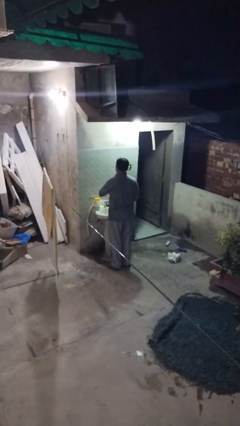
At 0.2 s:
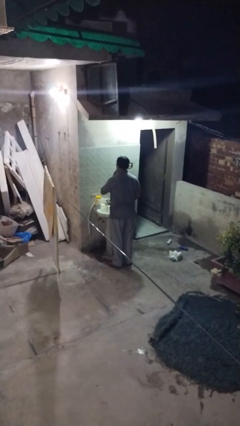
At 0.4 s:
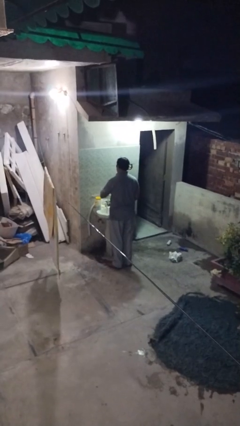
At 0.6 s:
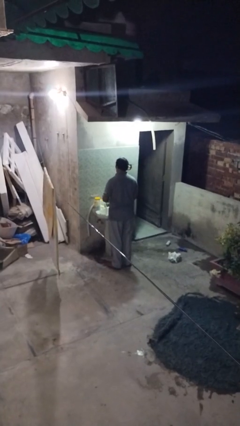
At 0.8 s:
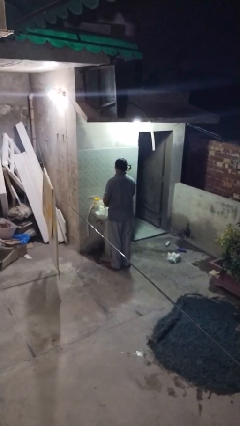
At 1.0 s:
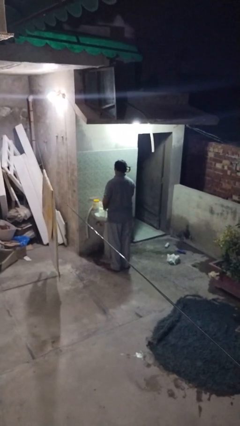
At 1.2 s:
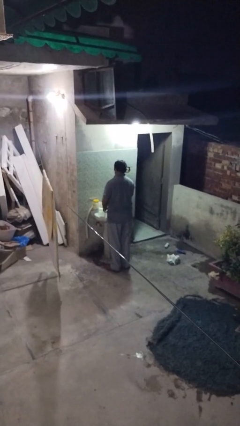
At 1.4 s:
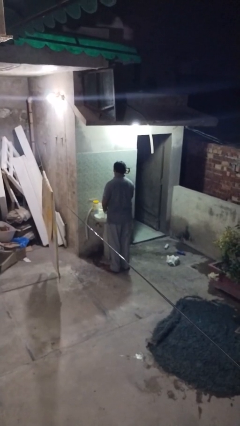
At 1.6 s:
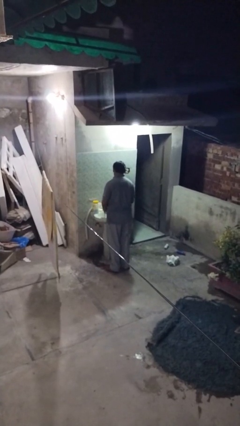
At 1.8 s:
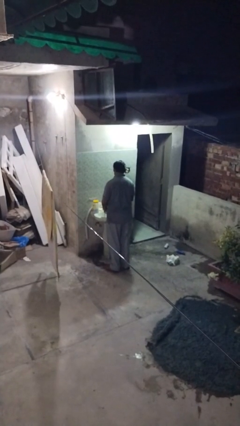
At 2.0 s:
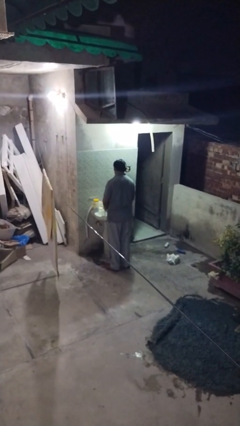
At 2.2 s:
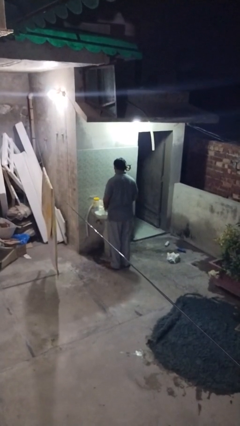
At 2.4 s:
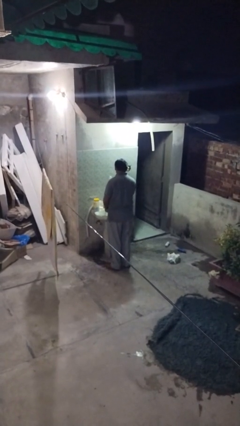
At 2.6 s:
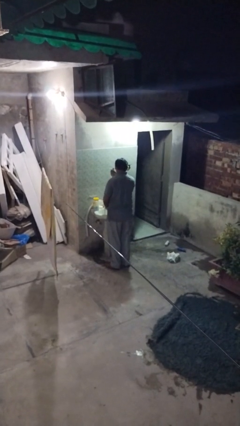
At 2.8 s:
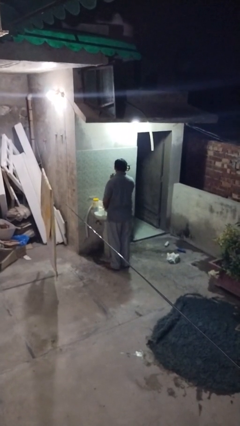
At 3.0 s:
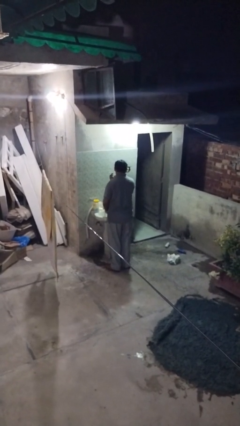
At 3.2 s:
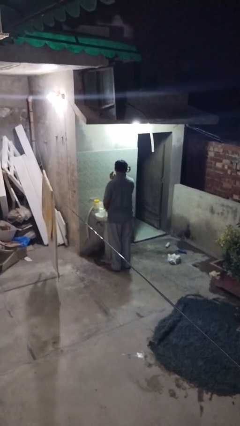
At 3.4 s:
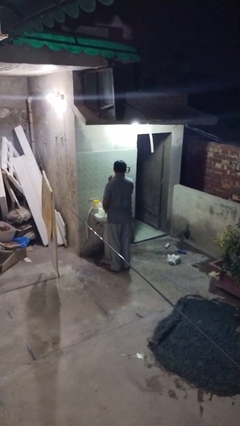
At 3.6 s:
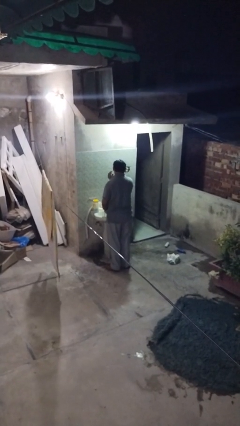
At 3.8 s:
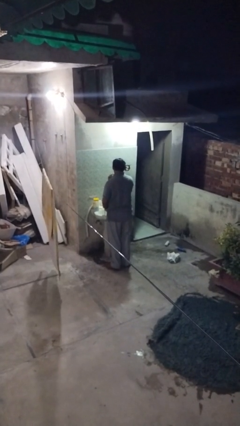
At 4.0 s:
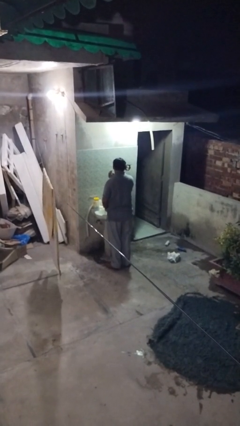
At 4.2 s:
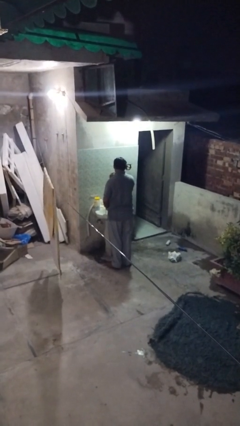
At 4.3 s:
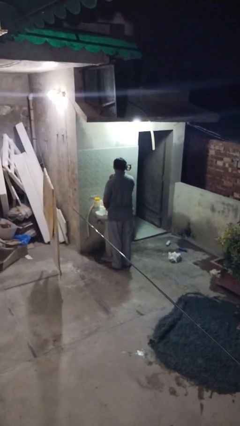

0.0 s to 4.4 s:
person shaves face

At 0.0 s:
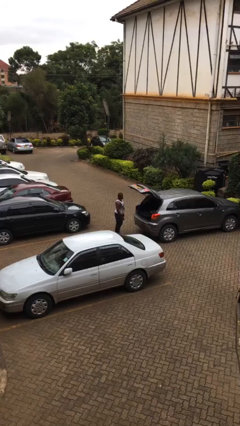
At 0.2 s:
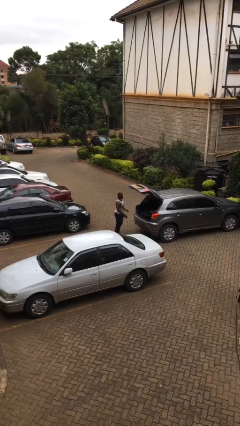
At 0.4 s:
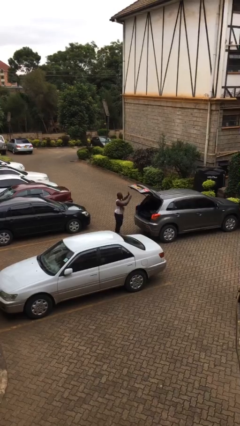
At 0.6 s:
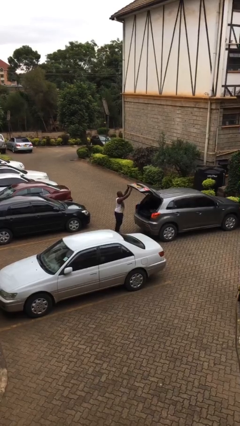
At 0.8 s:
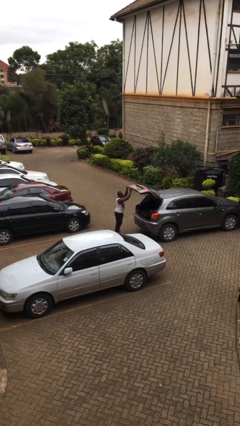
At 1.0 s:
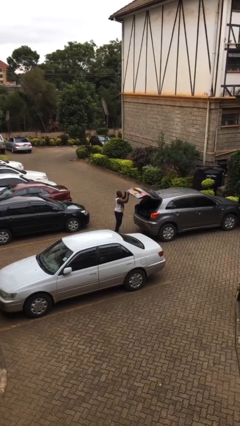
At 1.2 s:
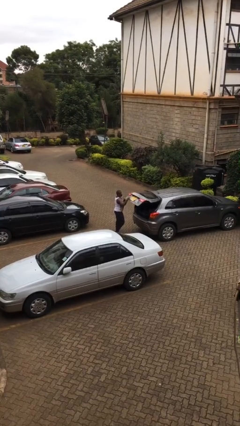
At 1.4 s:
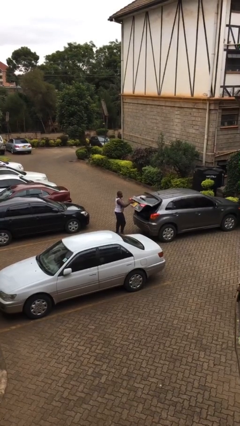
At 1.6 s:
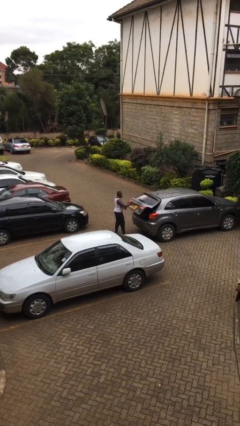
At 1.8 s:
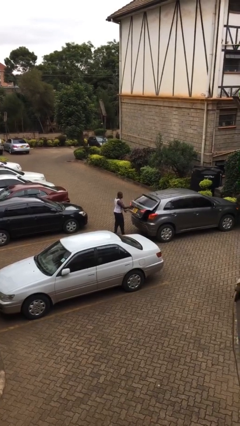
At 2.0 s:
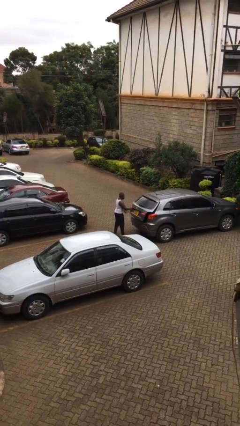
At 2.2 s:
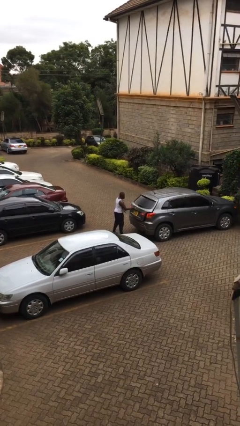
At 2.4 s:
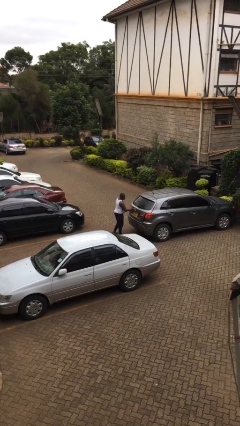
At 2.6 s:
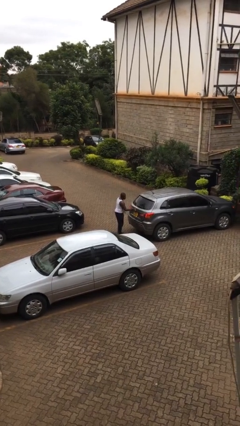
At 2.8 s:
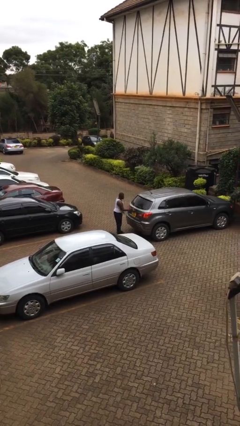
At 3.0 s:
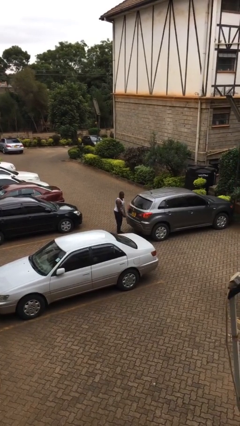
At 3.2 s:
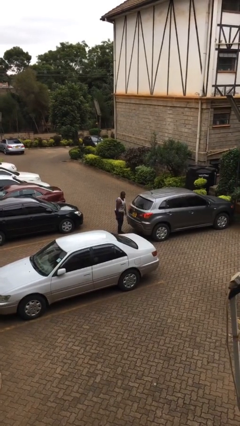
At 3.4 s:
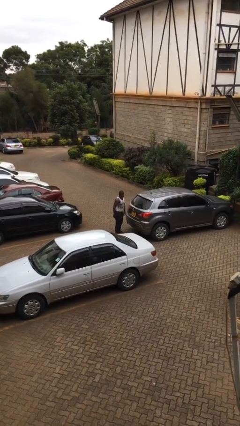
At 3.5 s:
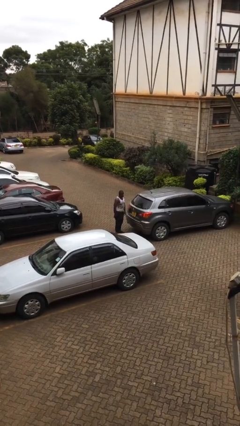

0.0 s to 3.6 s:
person closes car trunk

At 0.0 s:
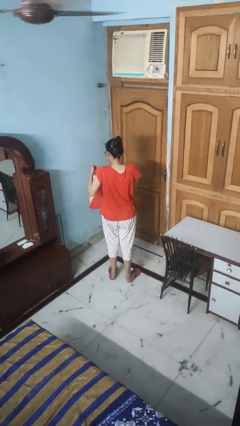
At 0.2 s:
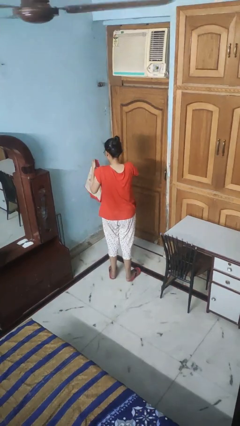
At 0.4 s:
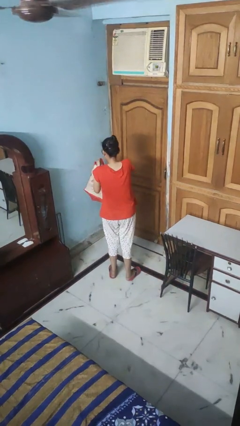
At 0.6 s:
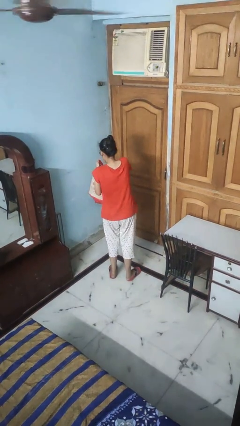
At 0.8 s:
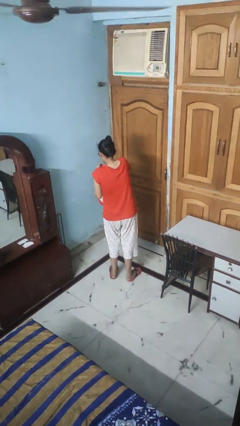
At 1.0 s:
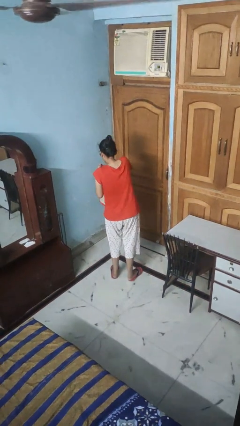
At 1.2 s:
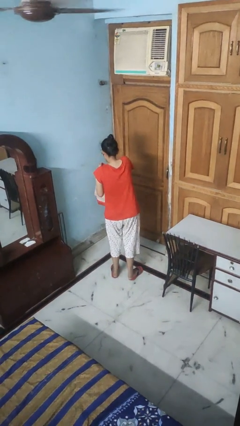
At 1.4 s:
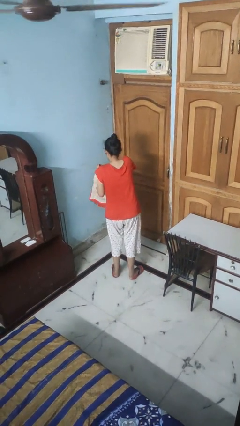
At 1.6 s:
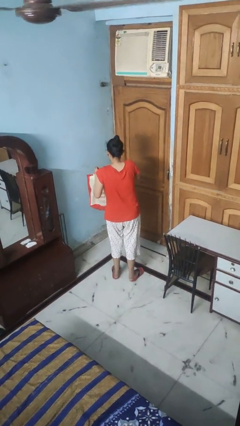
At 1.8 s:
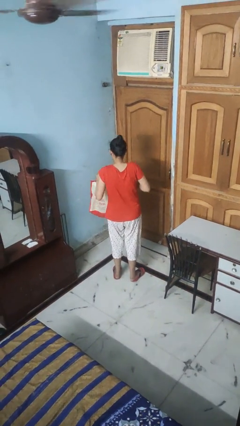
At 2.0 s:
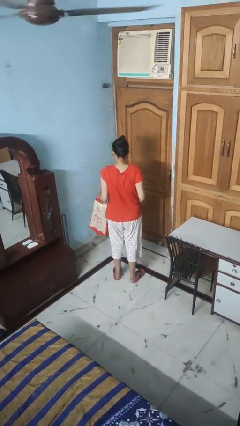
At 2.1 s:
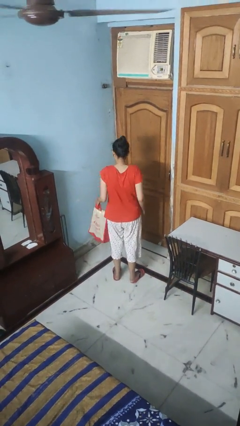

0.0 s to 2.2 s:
person searches in bag

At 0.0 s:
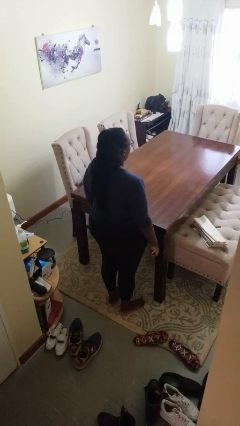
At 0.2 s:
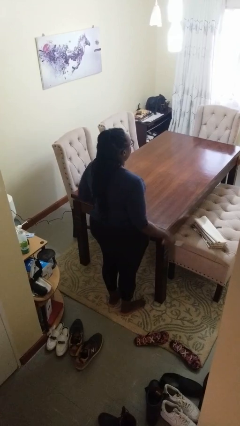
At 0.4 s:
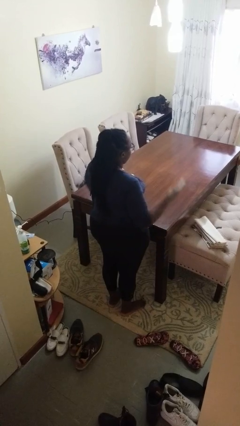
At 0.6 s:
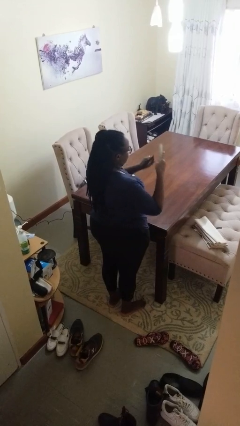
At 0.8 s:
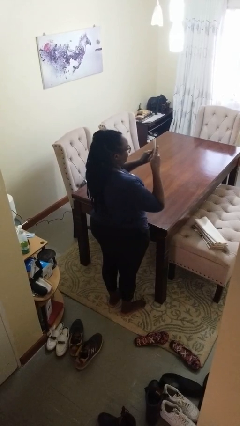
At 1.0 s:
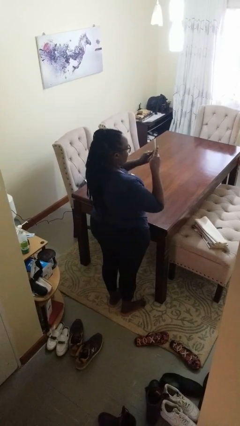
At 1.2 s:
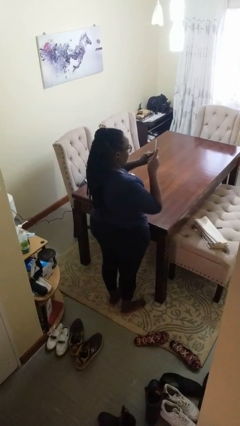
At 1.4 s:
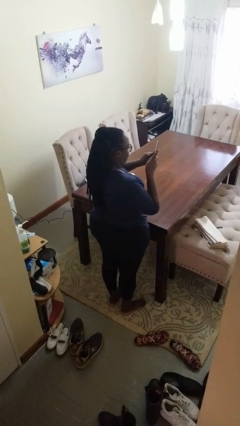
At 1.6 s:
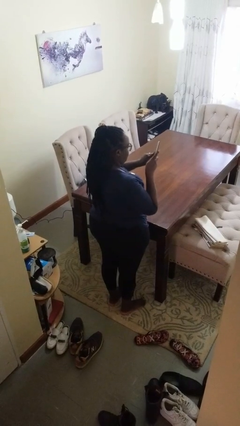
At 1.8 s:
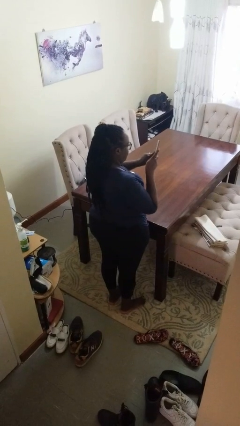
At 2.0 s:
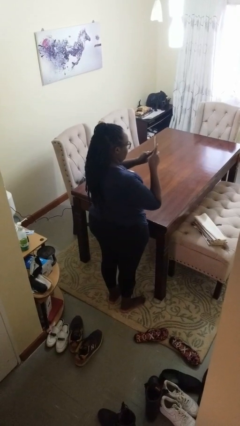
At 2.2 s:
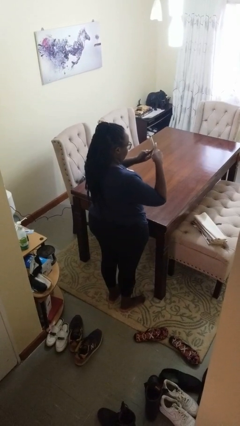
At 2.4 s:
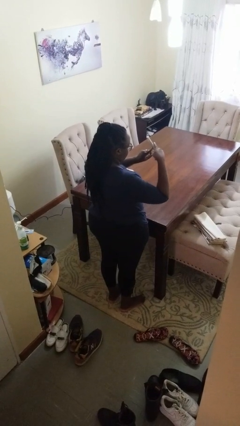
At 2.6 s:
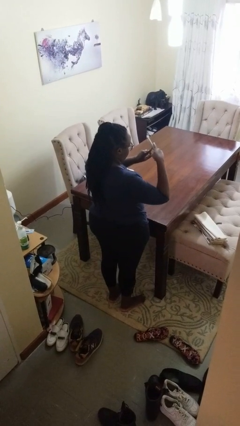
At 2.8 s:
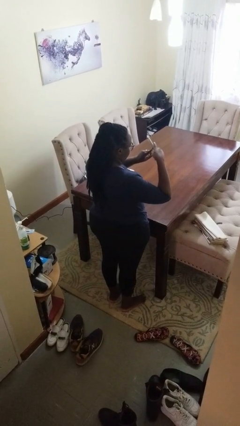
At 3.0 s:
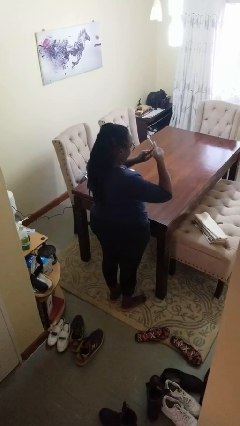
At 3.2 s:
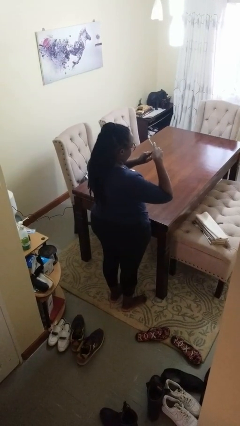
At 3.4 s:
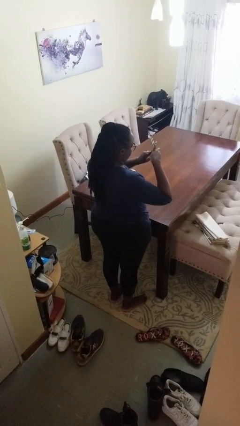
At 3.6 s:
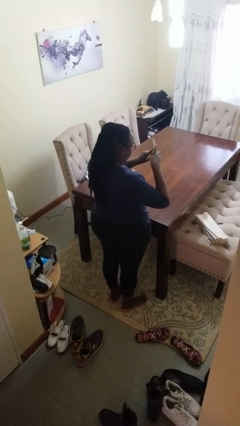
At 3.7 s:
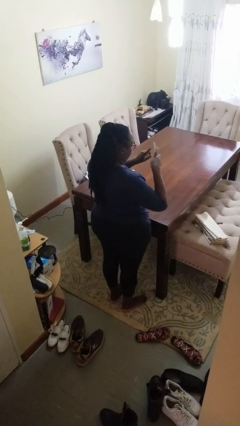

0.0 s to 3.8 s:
person files fingernails

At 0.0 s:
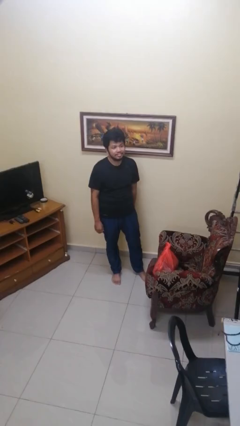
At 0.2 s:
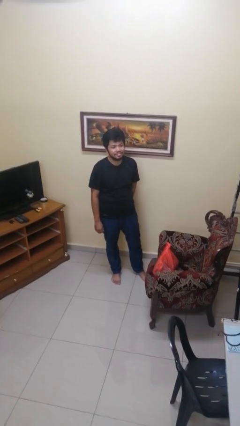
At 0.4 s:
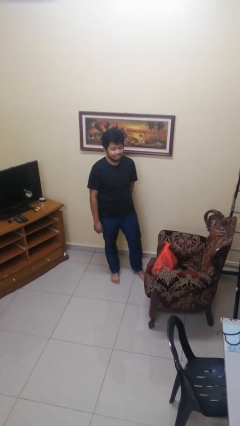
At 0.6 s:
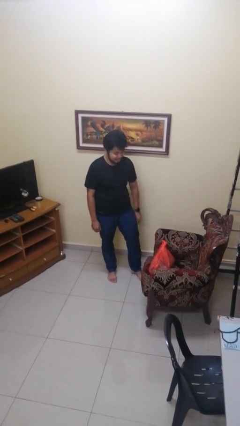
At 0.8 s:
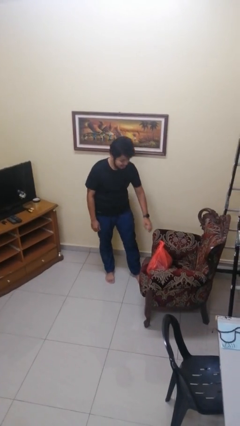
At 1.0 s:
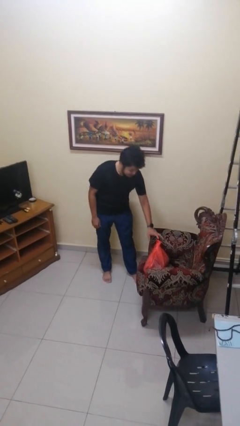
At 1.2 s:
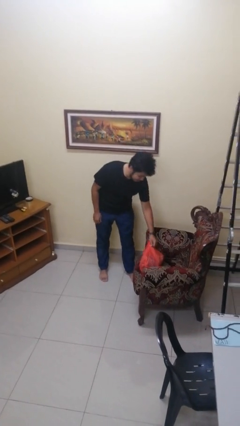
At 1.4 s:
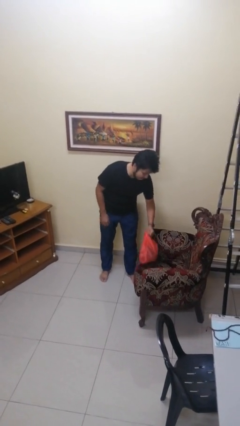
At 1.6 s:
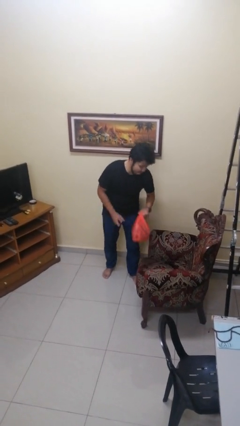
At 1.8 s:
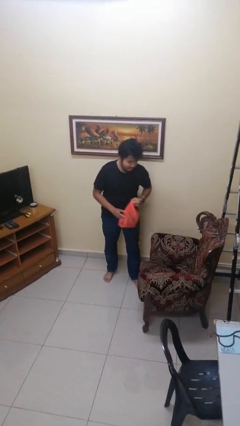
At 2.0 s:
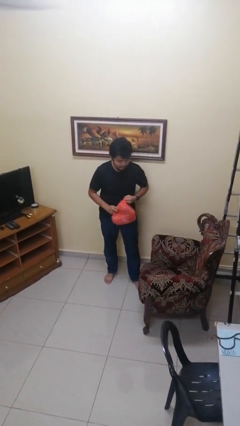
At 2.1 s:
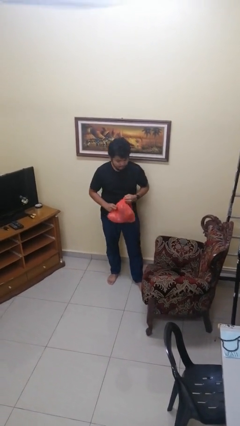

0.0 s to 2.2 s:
person picks up object from couch

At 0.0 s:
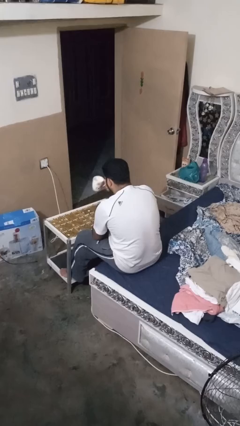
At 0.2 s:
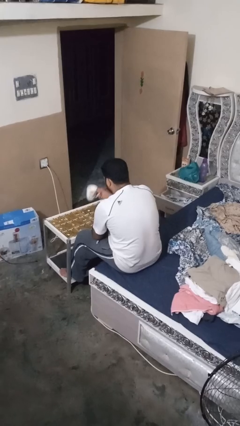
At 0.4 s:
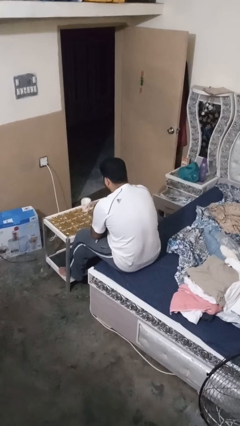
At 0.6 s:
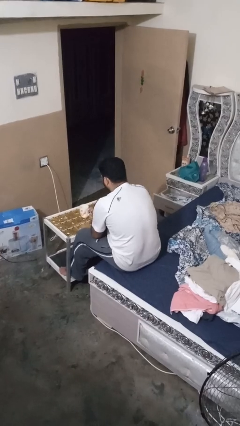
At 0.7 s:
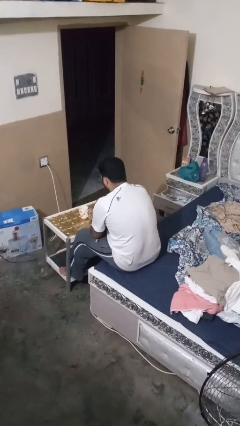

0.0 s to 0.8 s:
person puts down object on table
